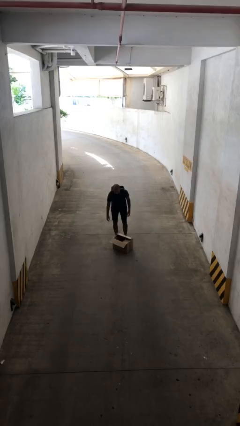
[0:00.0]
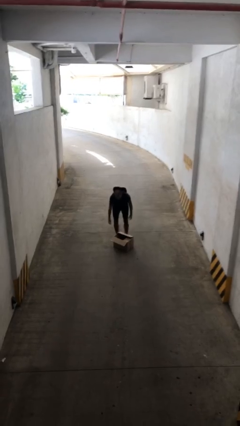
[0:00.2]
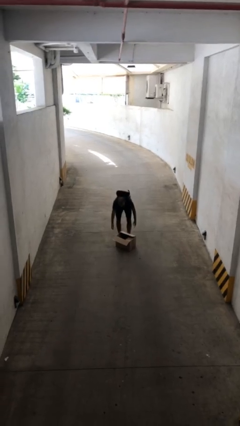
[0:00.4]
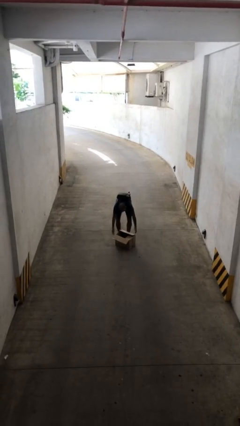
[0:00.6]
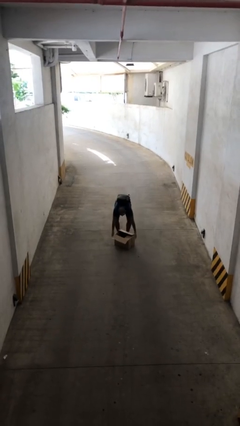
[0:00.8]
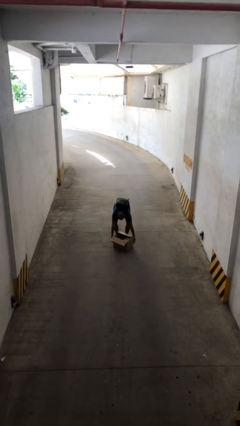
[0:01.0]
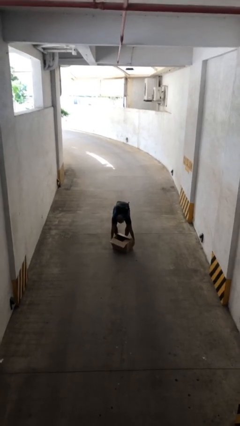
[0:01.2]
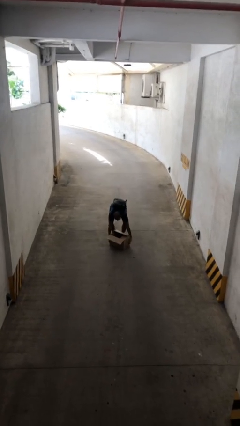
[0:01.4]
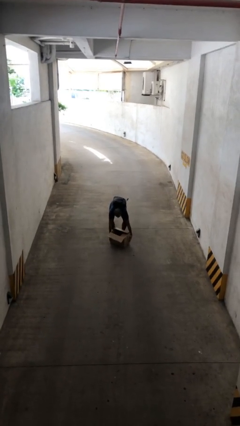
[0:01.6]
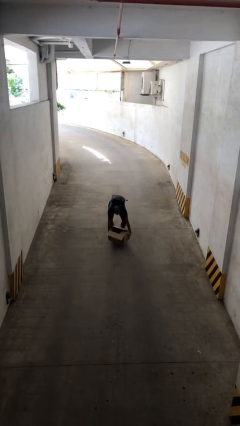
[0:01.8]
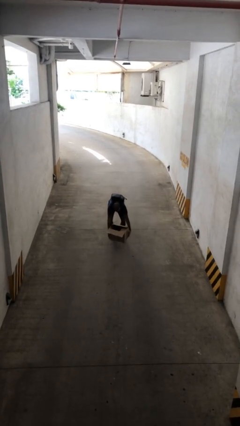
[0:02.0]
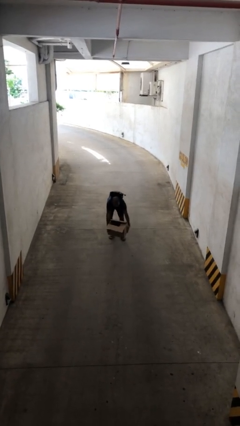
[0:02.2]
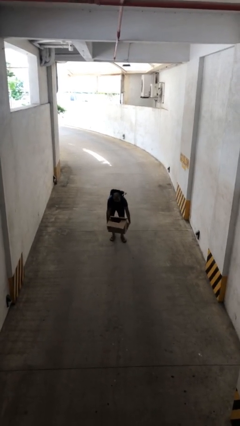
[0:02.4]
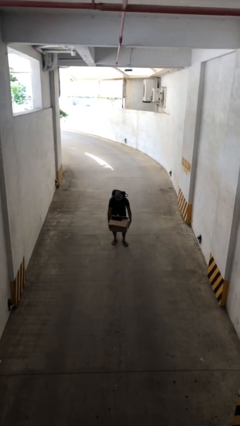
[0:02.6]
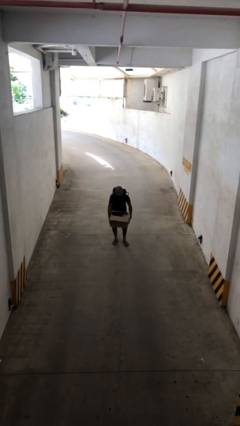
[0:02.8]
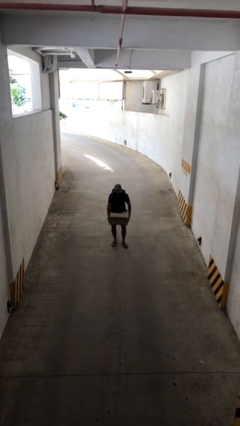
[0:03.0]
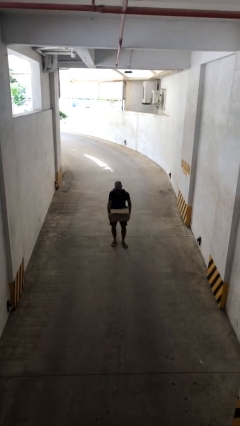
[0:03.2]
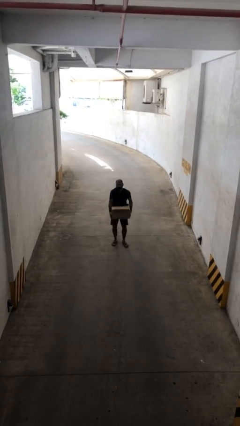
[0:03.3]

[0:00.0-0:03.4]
person picks up object from floor

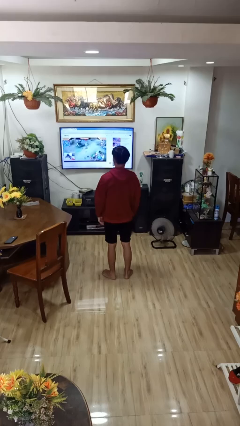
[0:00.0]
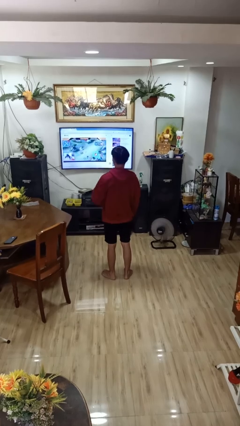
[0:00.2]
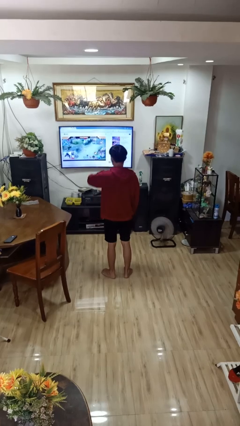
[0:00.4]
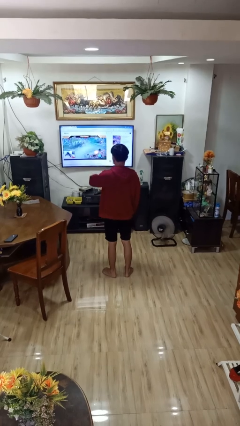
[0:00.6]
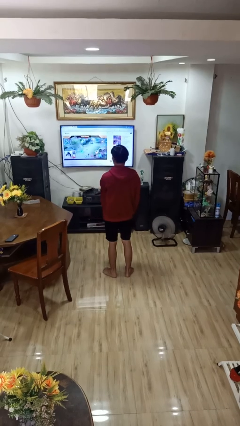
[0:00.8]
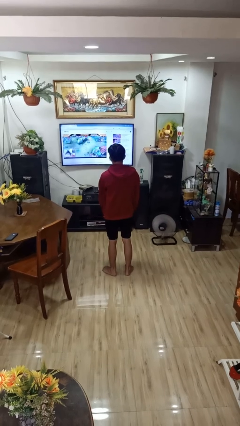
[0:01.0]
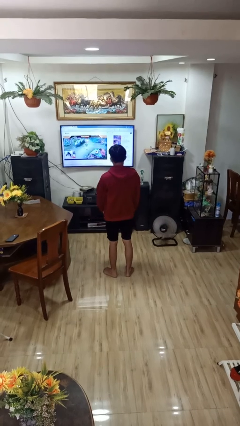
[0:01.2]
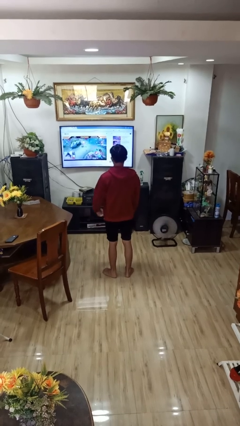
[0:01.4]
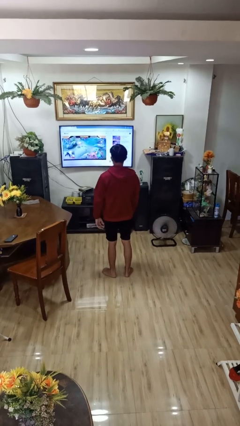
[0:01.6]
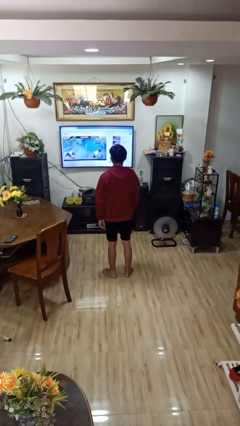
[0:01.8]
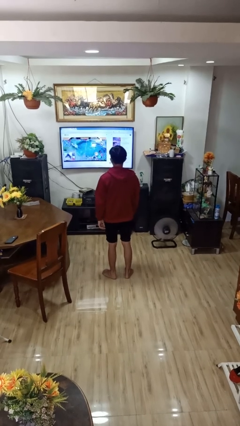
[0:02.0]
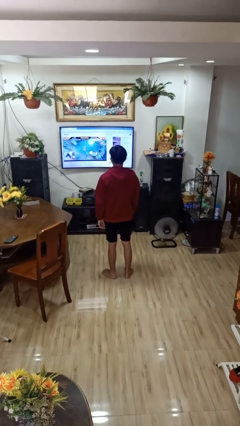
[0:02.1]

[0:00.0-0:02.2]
person unzips jacket

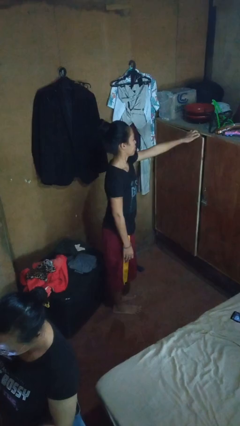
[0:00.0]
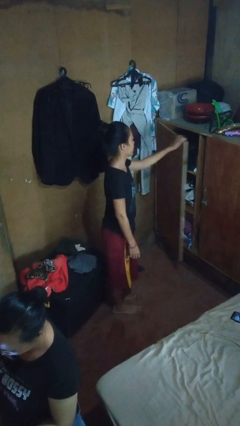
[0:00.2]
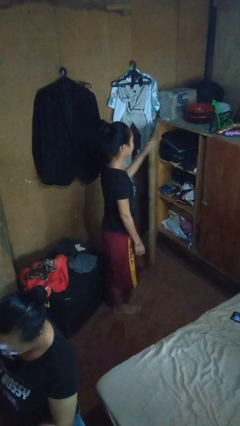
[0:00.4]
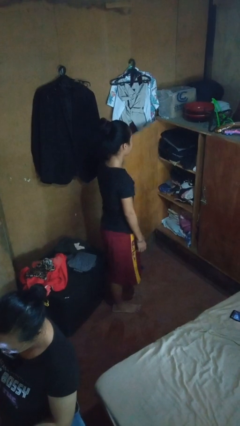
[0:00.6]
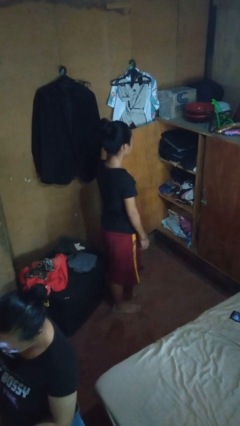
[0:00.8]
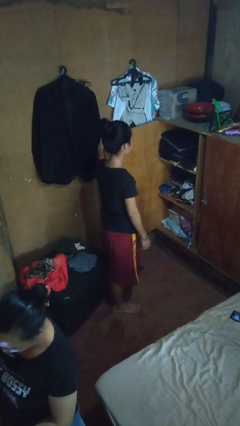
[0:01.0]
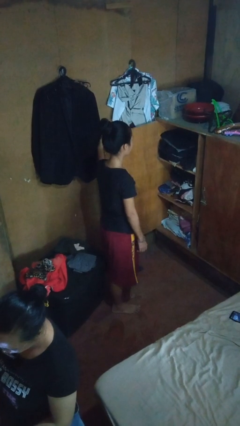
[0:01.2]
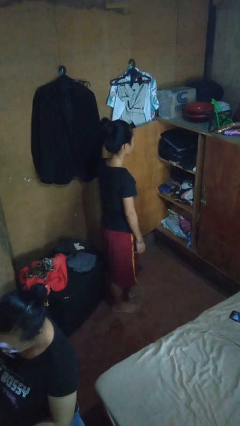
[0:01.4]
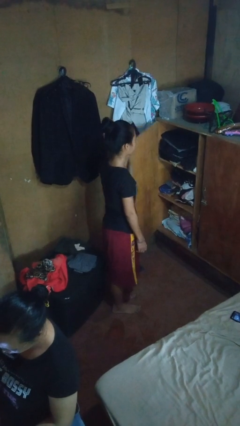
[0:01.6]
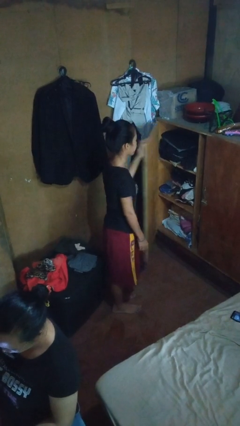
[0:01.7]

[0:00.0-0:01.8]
person opens closet door

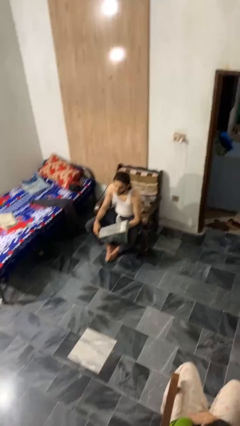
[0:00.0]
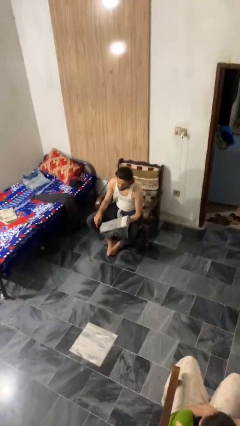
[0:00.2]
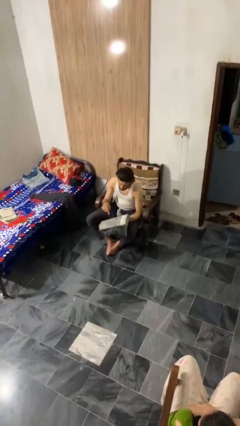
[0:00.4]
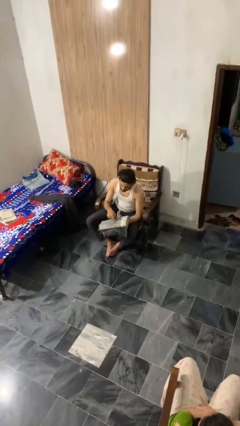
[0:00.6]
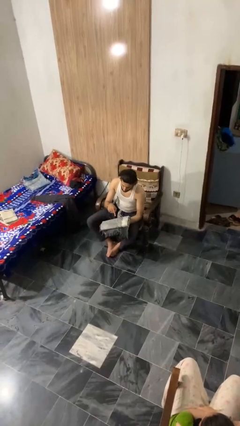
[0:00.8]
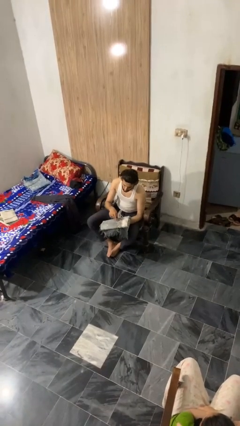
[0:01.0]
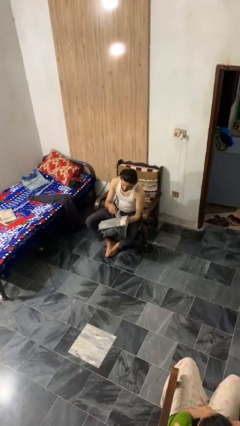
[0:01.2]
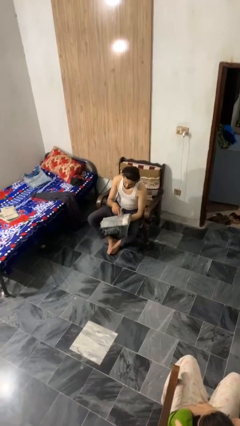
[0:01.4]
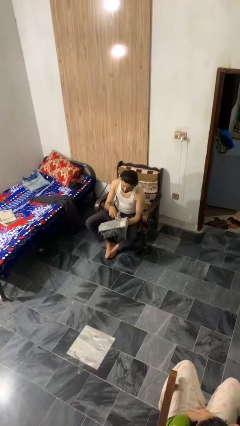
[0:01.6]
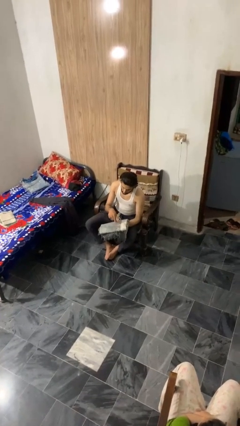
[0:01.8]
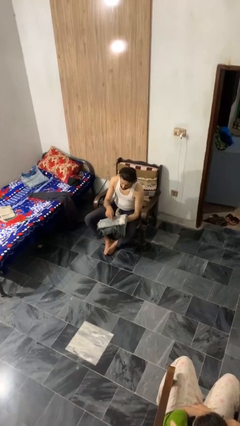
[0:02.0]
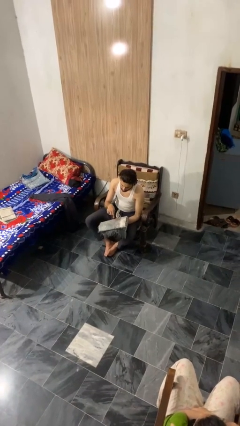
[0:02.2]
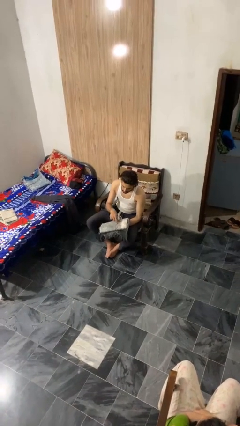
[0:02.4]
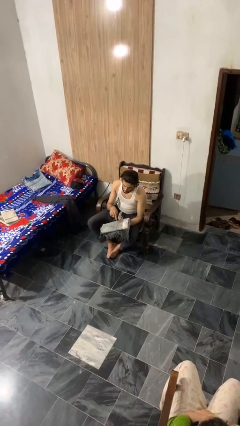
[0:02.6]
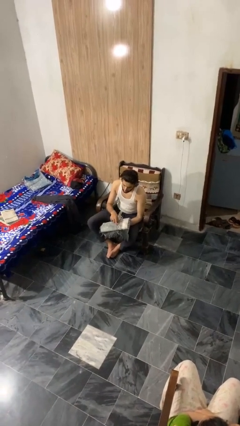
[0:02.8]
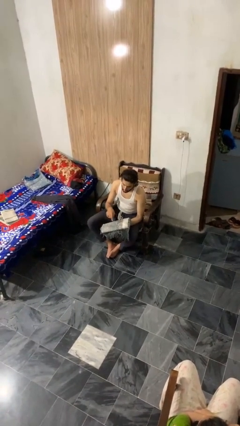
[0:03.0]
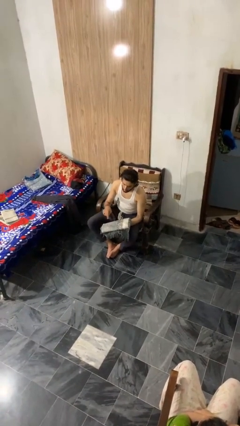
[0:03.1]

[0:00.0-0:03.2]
person taps object with finger

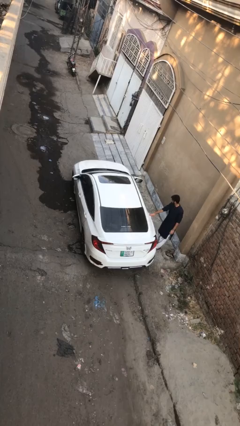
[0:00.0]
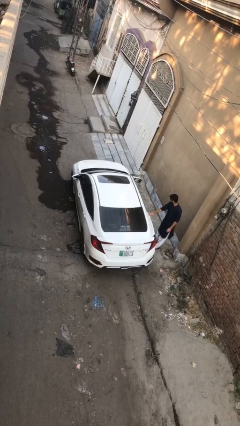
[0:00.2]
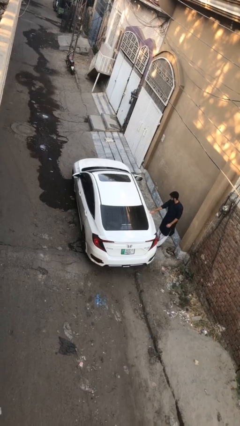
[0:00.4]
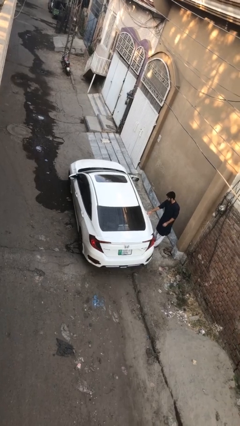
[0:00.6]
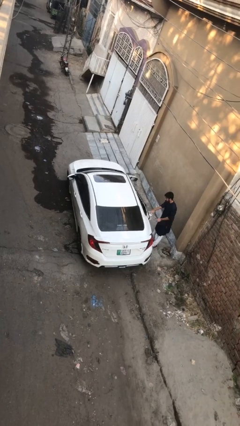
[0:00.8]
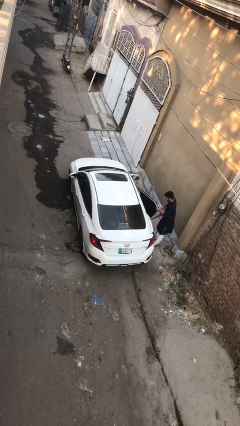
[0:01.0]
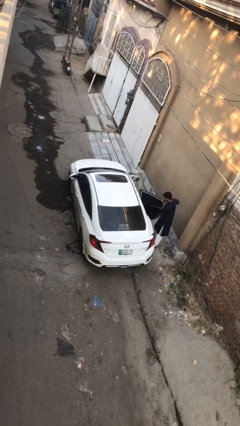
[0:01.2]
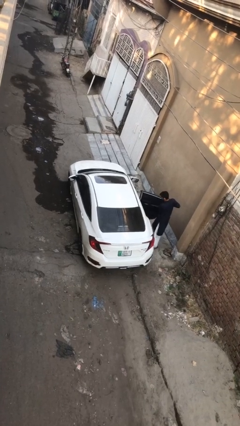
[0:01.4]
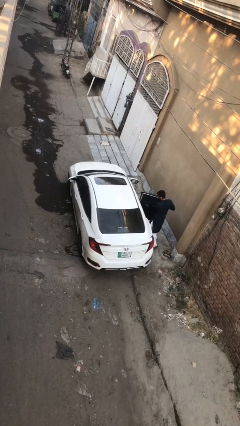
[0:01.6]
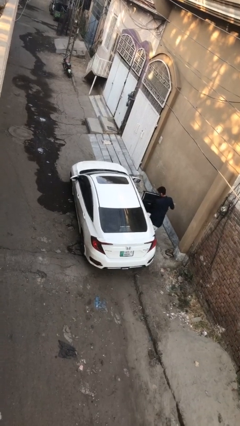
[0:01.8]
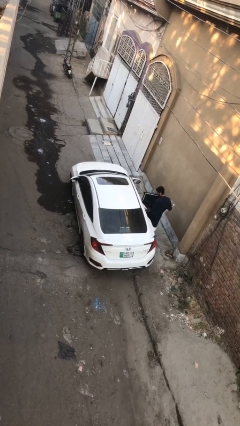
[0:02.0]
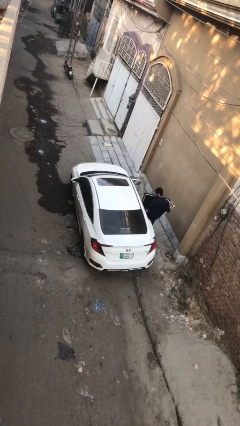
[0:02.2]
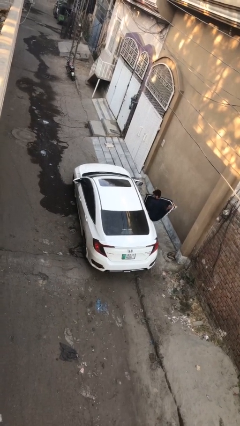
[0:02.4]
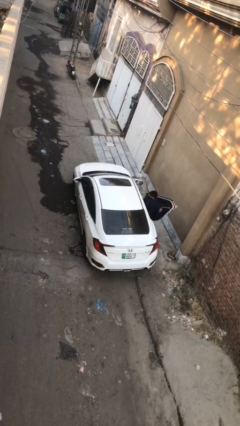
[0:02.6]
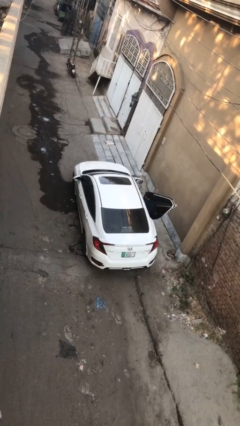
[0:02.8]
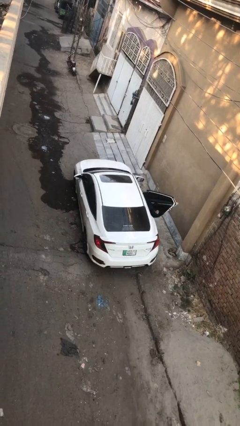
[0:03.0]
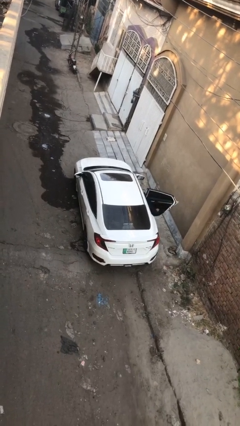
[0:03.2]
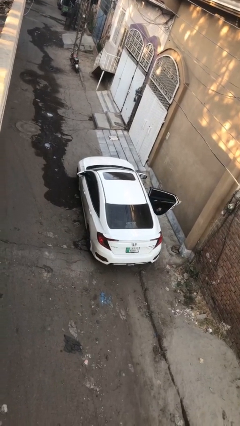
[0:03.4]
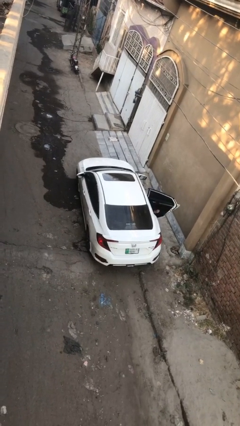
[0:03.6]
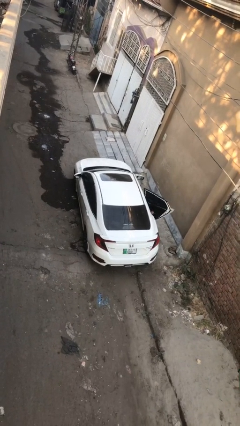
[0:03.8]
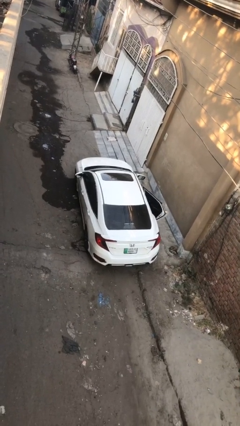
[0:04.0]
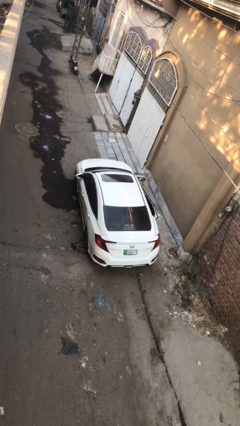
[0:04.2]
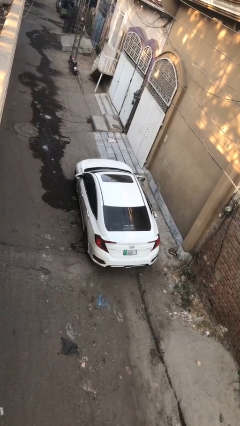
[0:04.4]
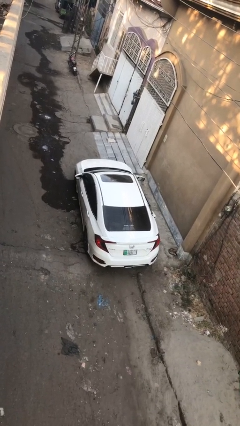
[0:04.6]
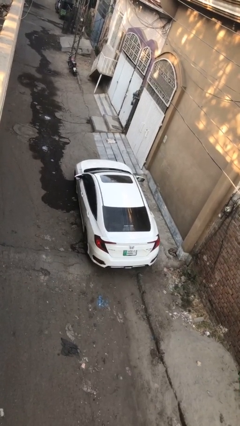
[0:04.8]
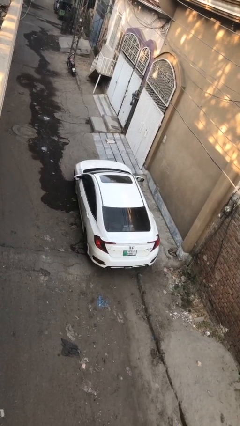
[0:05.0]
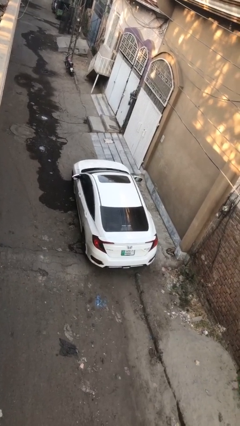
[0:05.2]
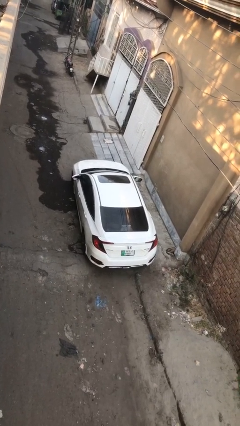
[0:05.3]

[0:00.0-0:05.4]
car picks up person

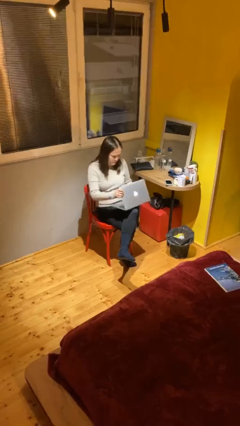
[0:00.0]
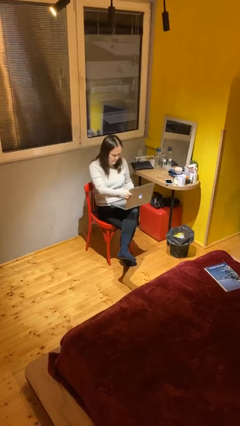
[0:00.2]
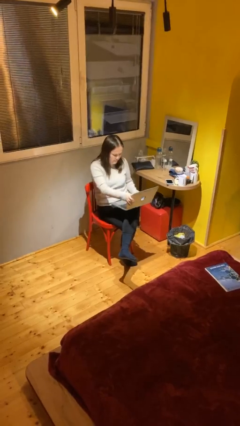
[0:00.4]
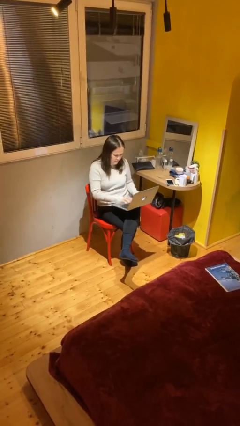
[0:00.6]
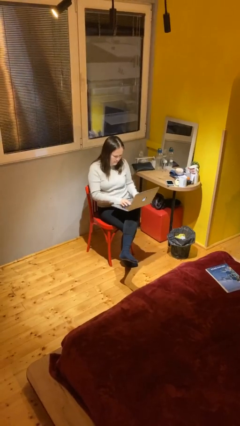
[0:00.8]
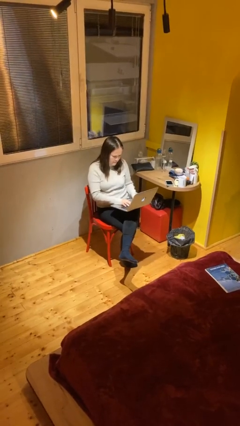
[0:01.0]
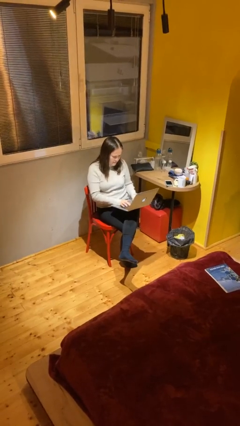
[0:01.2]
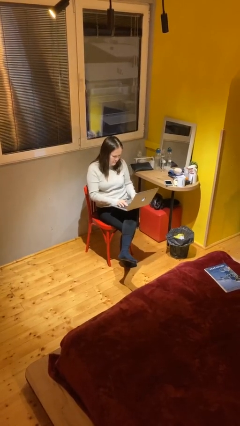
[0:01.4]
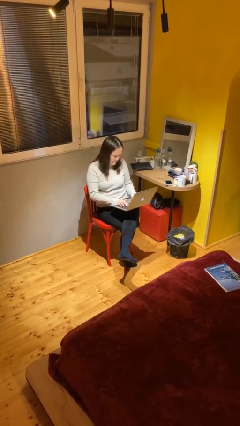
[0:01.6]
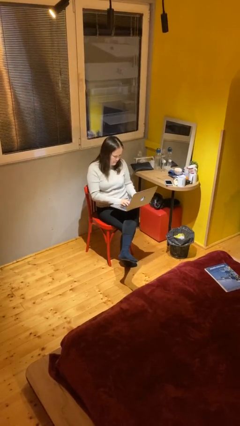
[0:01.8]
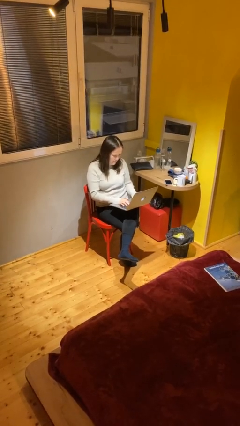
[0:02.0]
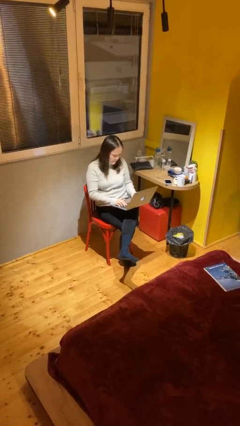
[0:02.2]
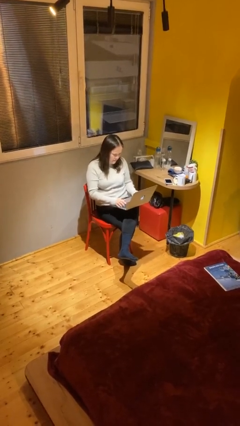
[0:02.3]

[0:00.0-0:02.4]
person interacts with laptop
